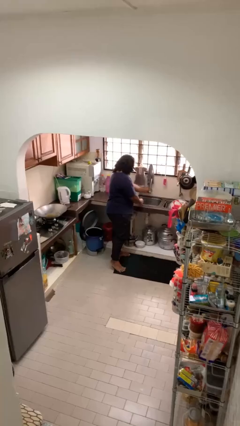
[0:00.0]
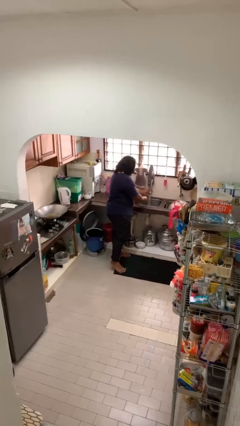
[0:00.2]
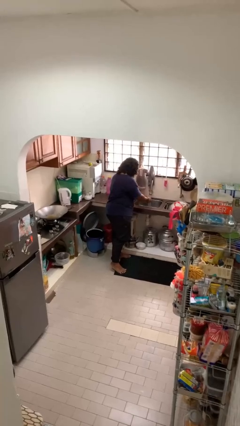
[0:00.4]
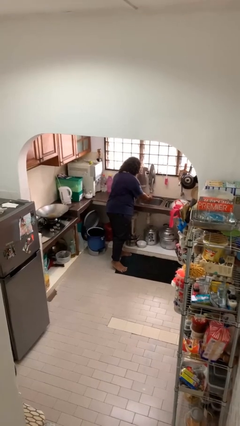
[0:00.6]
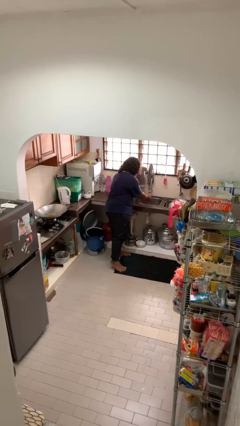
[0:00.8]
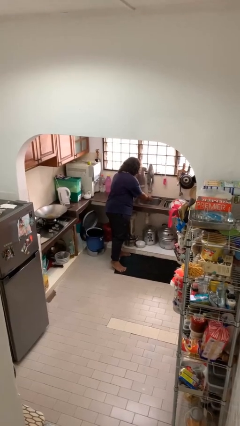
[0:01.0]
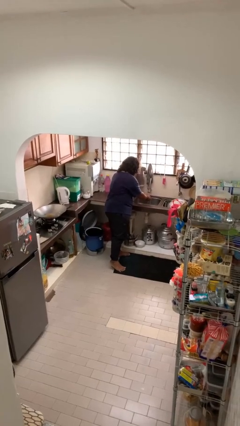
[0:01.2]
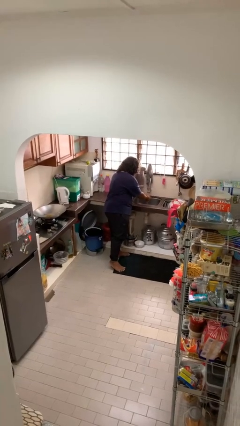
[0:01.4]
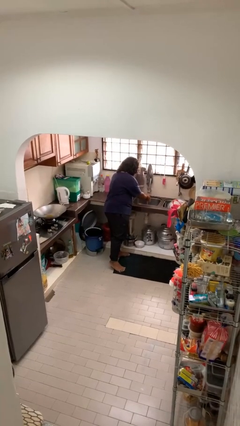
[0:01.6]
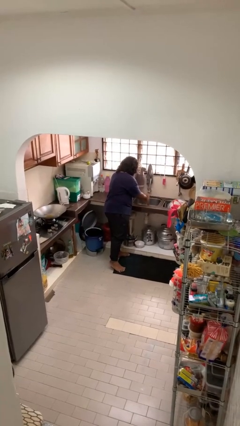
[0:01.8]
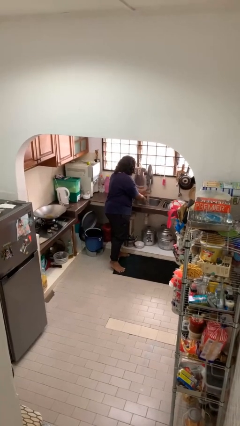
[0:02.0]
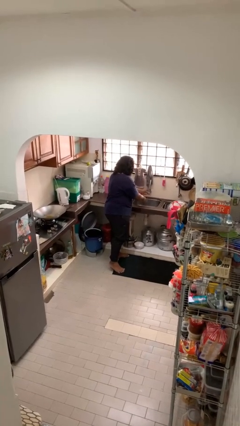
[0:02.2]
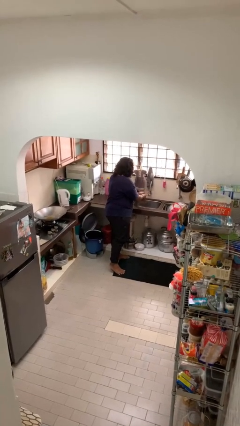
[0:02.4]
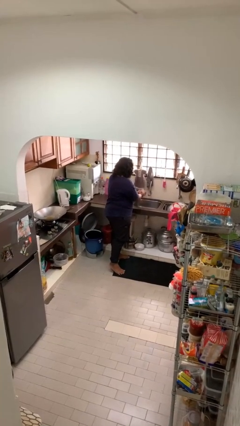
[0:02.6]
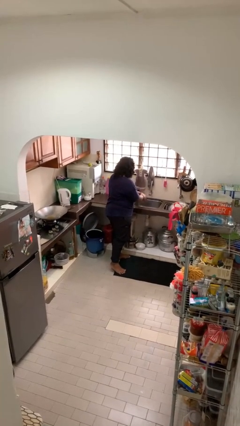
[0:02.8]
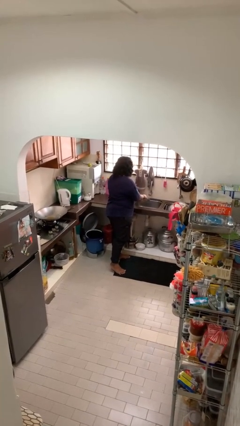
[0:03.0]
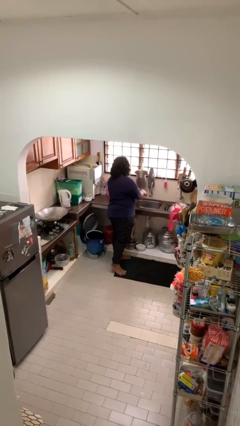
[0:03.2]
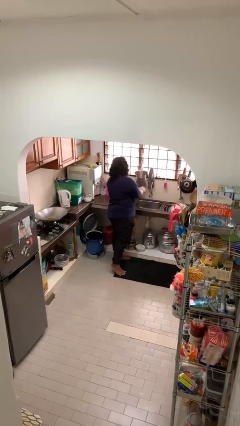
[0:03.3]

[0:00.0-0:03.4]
person washes hands

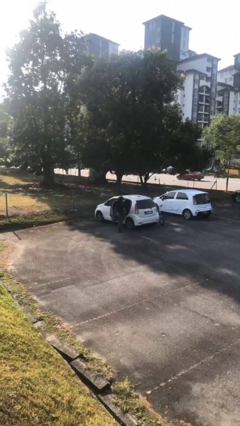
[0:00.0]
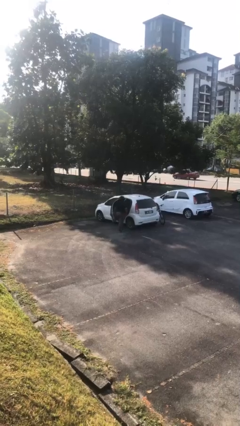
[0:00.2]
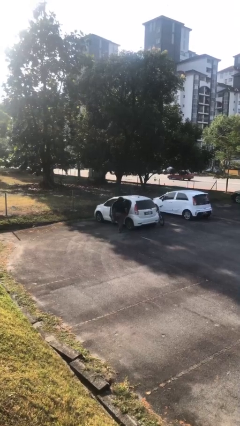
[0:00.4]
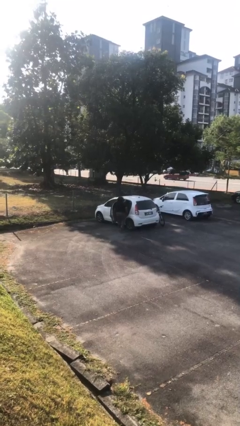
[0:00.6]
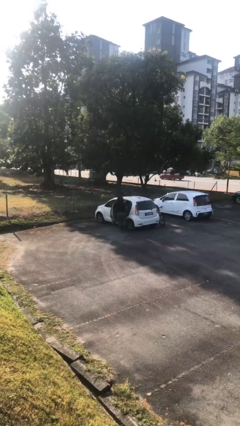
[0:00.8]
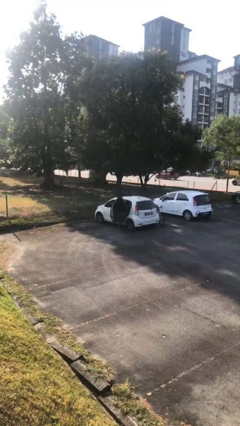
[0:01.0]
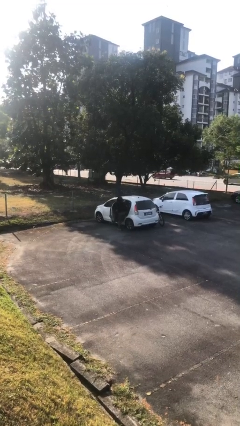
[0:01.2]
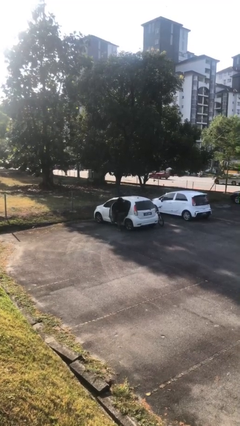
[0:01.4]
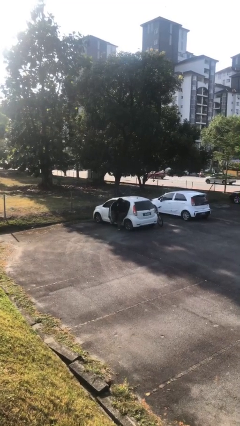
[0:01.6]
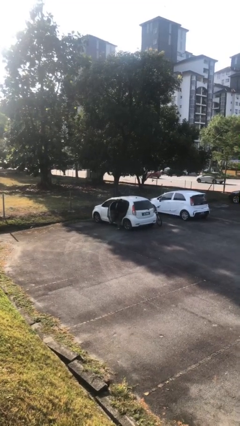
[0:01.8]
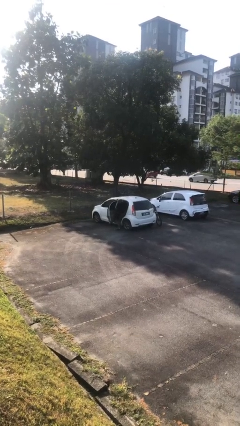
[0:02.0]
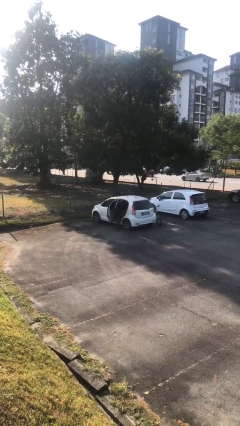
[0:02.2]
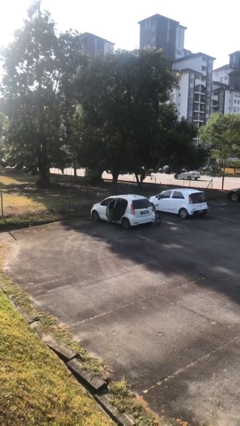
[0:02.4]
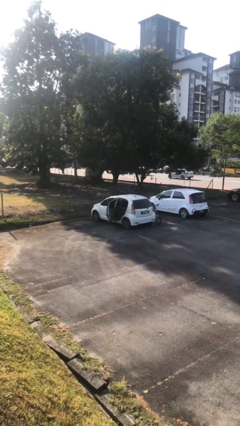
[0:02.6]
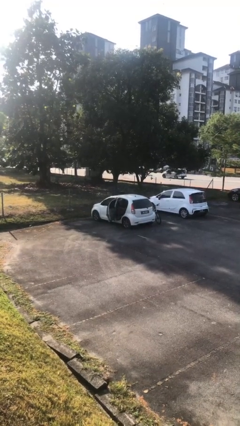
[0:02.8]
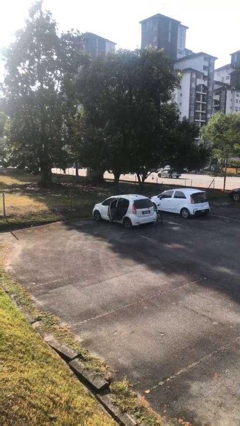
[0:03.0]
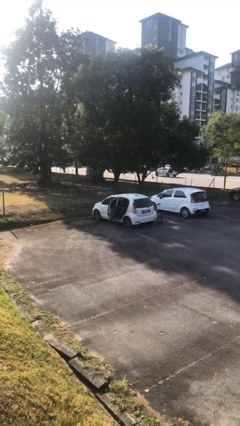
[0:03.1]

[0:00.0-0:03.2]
person enters car

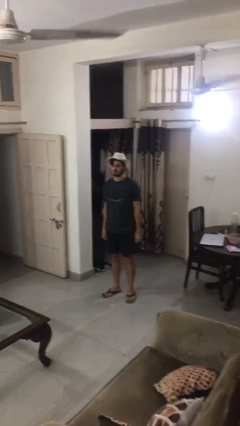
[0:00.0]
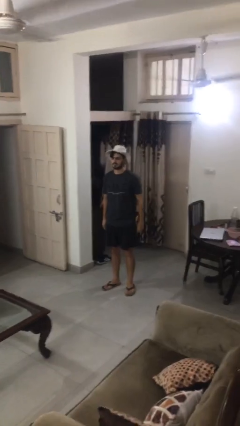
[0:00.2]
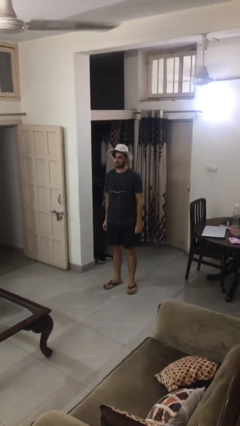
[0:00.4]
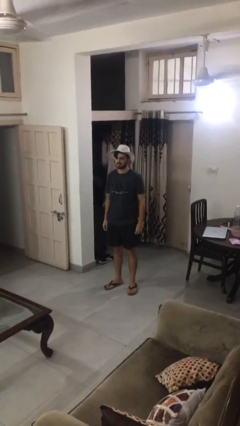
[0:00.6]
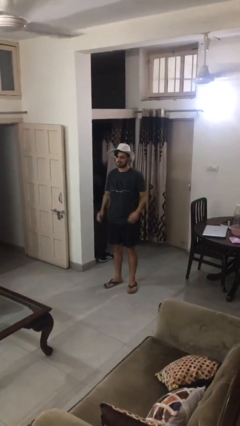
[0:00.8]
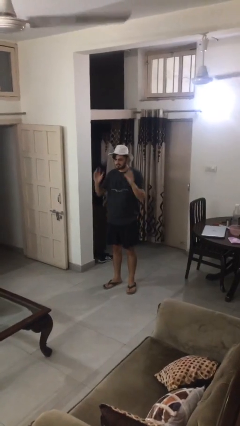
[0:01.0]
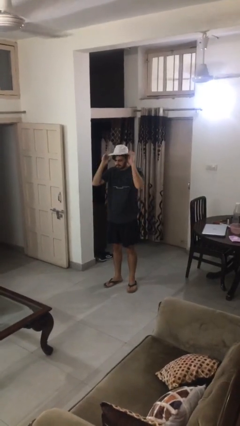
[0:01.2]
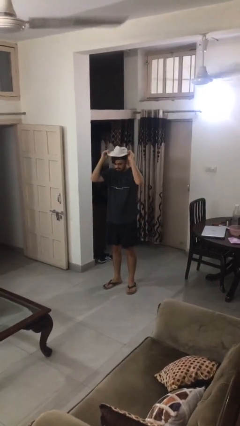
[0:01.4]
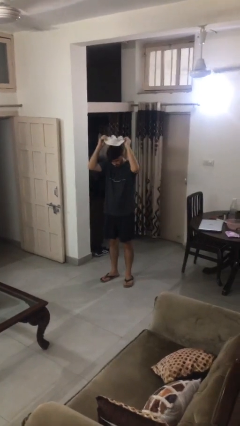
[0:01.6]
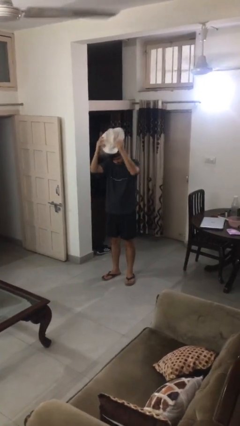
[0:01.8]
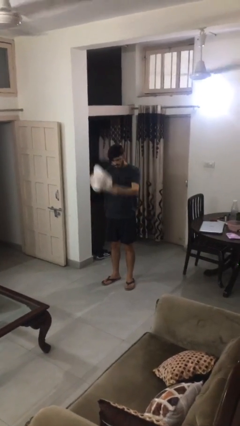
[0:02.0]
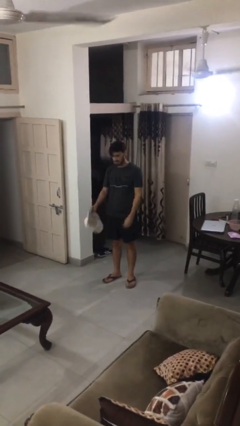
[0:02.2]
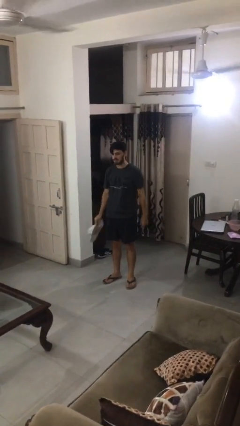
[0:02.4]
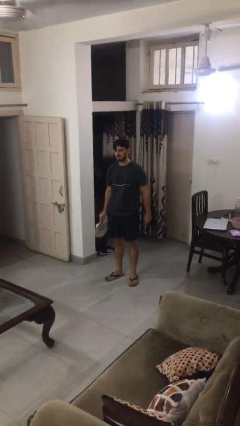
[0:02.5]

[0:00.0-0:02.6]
person takes off hat

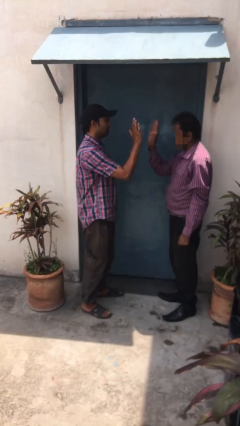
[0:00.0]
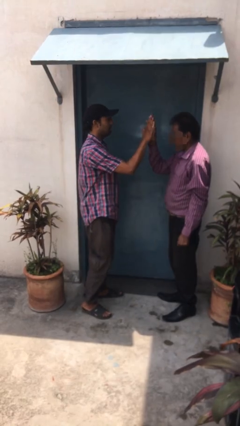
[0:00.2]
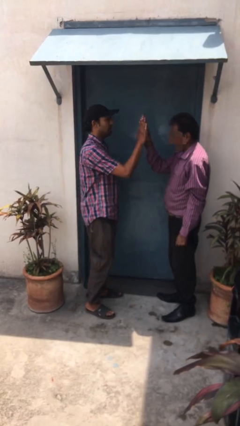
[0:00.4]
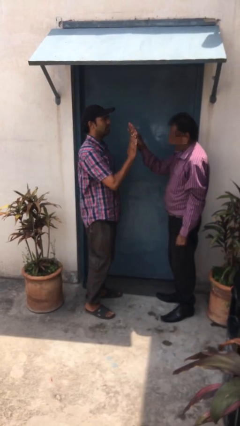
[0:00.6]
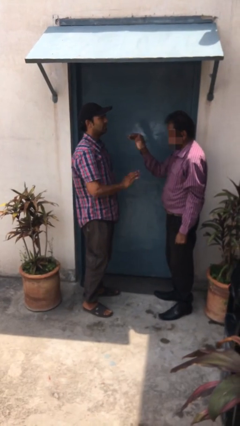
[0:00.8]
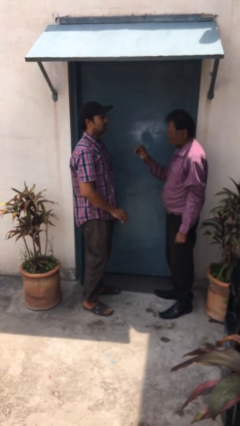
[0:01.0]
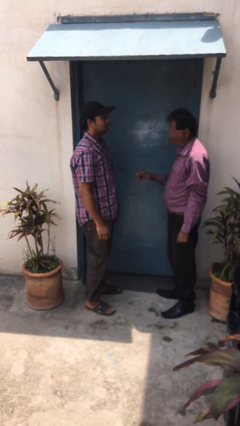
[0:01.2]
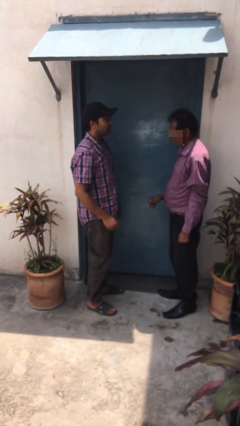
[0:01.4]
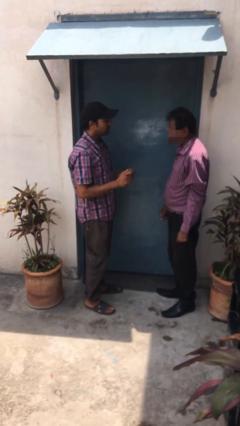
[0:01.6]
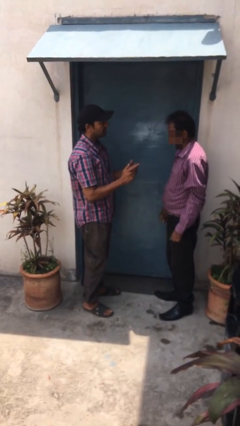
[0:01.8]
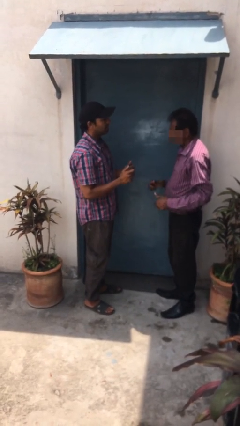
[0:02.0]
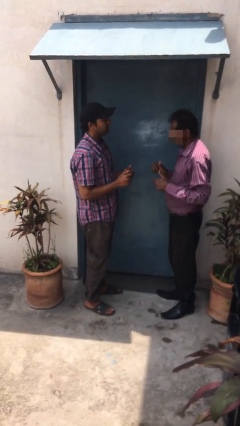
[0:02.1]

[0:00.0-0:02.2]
person highfives hand

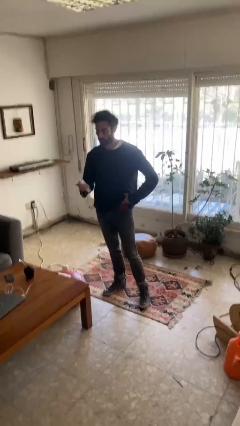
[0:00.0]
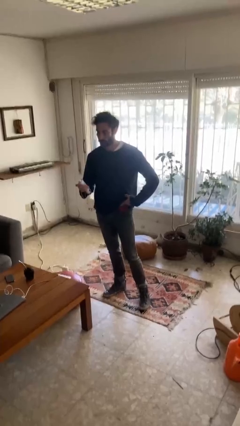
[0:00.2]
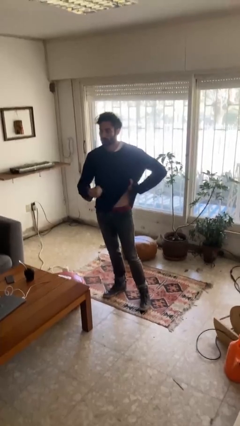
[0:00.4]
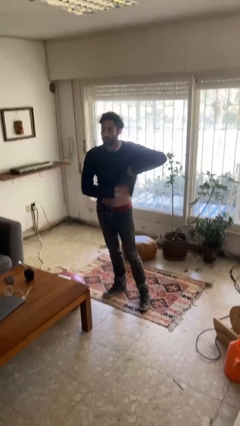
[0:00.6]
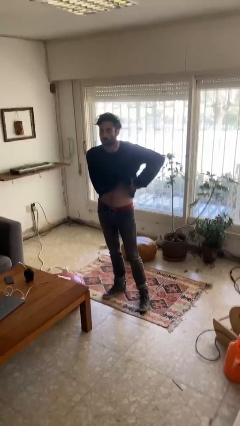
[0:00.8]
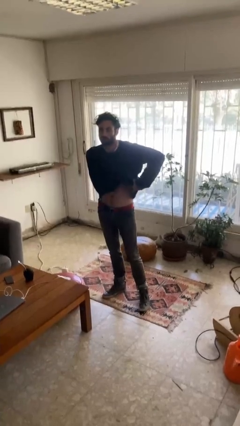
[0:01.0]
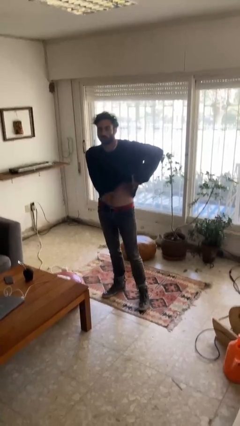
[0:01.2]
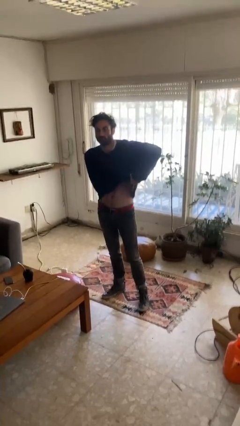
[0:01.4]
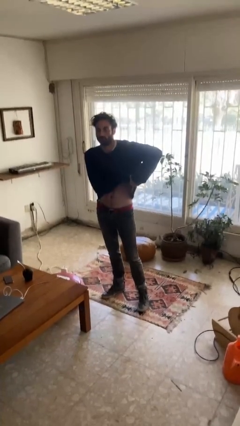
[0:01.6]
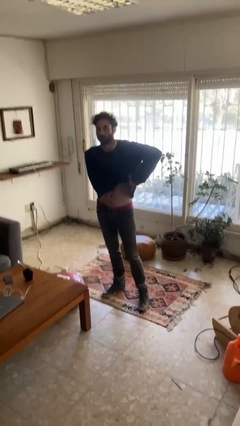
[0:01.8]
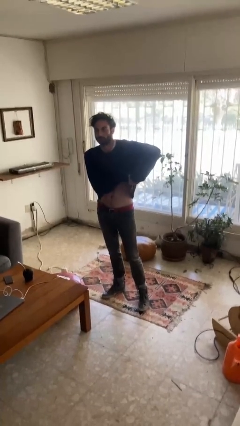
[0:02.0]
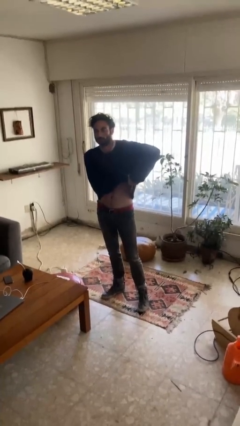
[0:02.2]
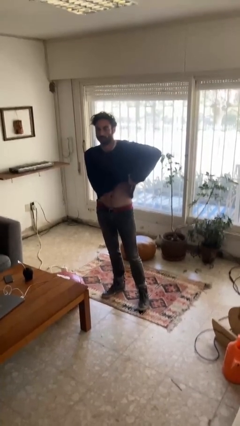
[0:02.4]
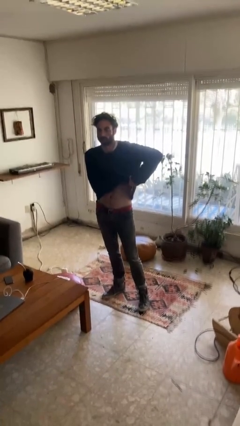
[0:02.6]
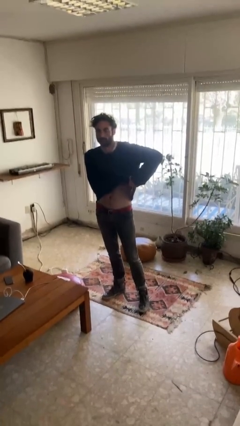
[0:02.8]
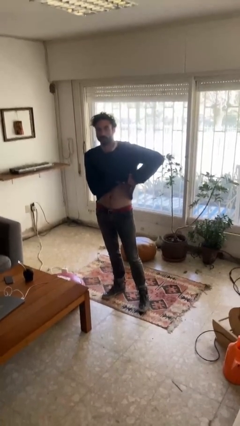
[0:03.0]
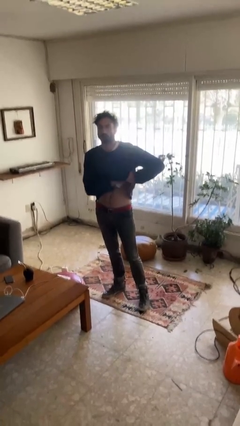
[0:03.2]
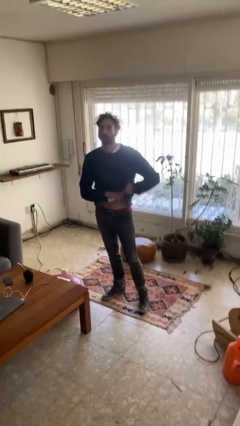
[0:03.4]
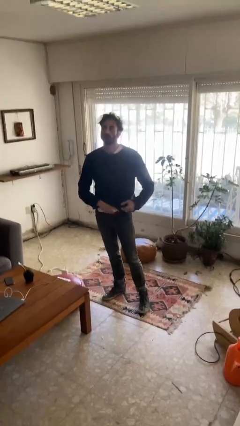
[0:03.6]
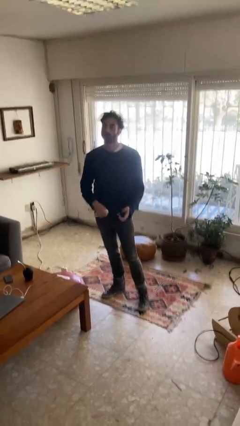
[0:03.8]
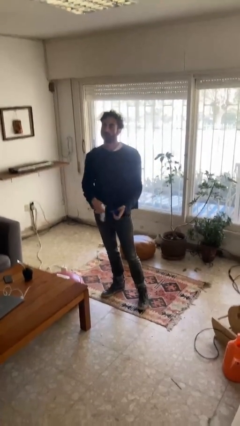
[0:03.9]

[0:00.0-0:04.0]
person applies deodorant

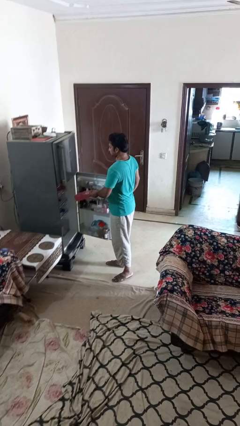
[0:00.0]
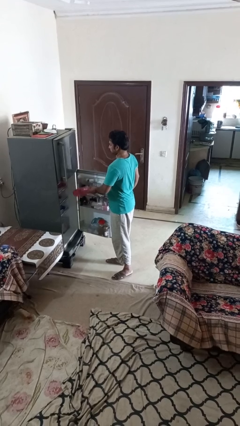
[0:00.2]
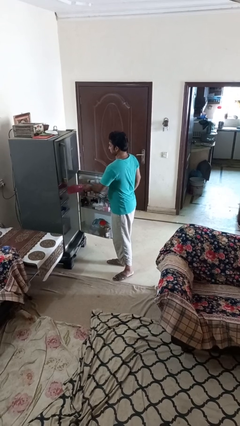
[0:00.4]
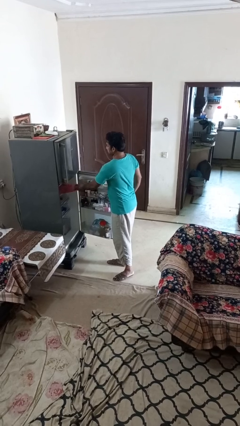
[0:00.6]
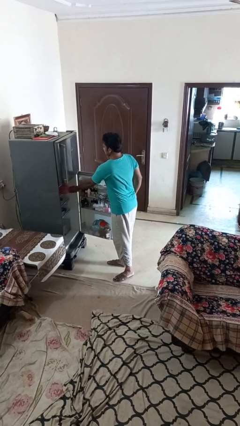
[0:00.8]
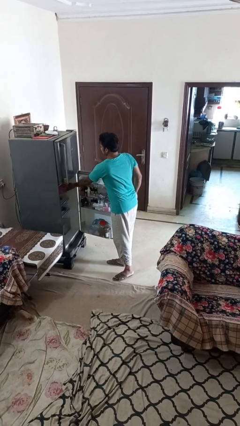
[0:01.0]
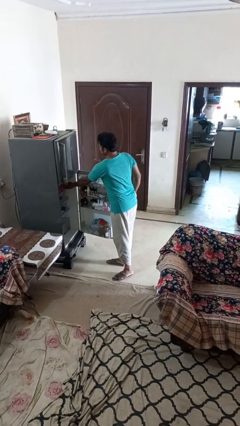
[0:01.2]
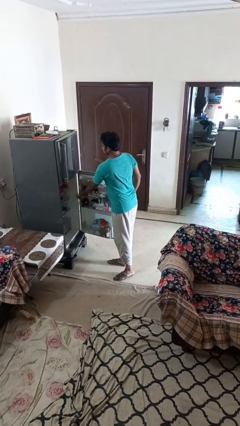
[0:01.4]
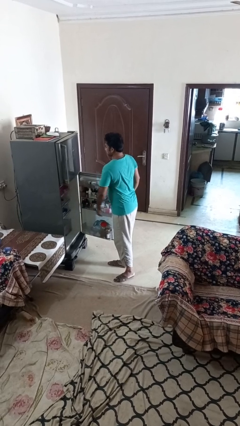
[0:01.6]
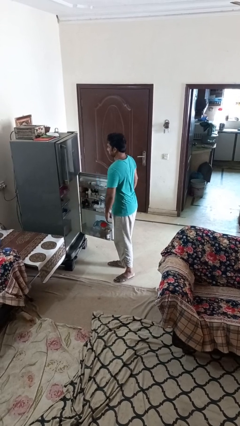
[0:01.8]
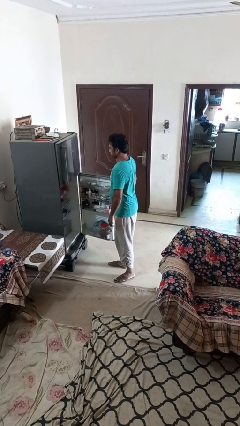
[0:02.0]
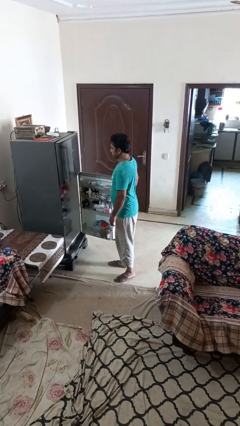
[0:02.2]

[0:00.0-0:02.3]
person puts object into refrigerator

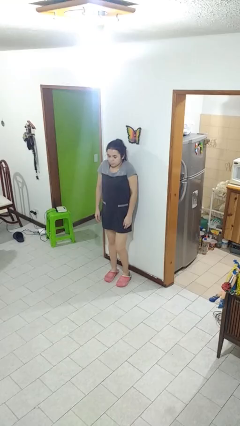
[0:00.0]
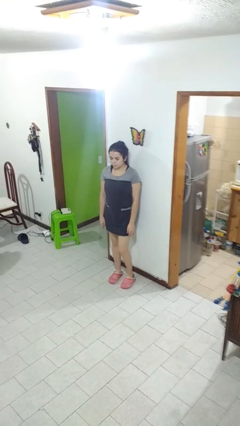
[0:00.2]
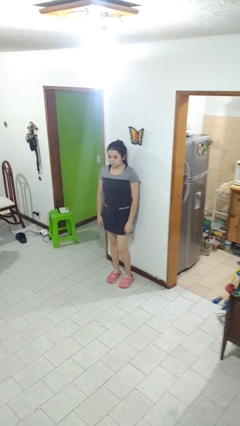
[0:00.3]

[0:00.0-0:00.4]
person shrugs
